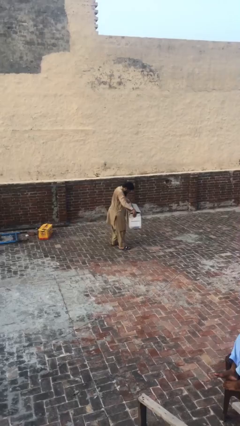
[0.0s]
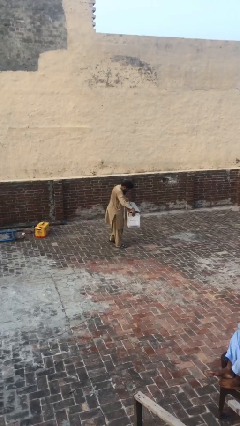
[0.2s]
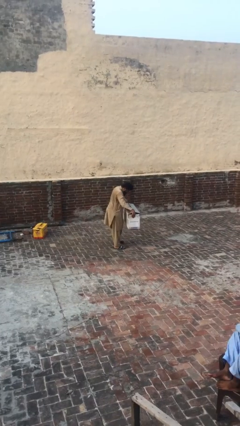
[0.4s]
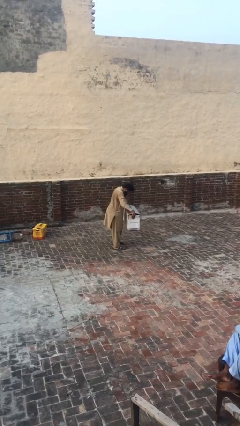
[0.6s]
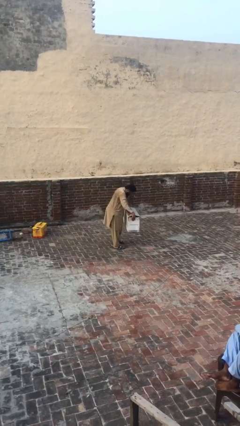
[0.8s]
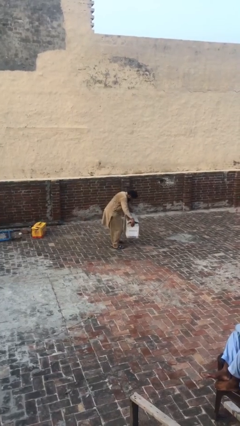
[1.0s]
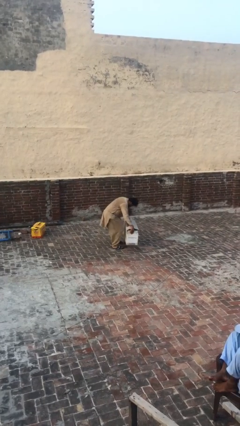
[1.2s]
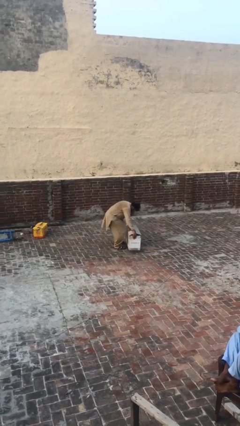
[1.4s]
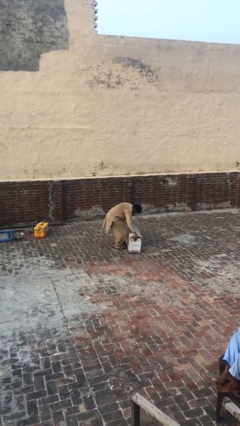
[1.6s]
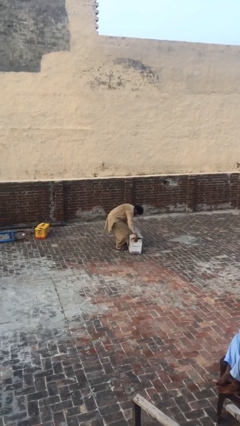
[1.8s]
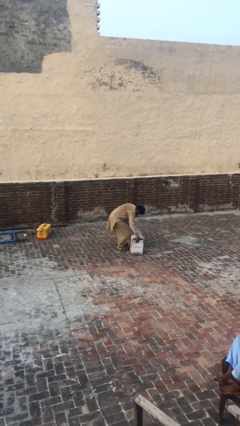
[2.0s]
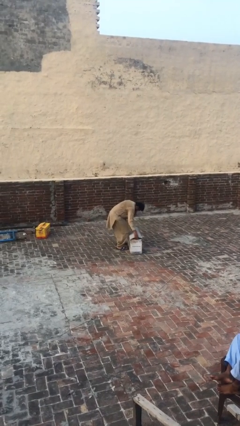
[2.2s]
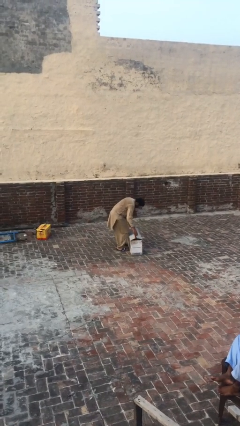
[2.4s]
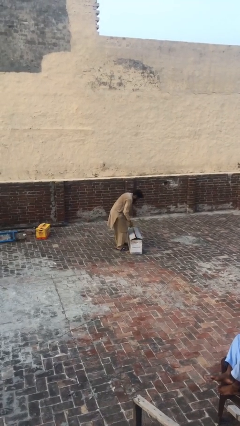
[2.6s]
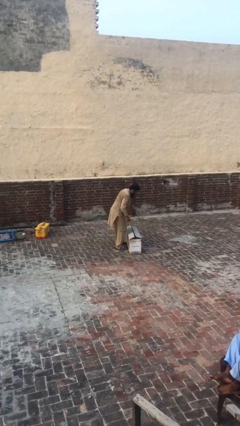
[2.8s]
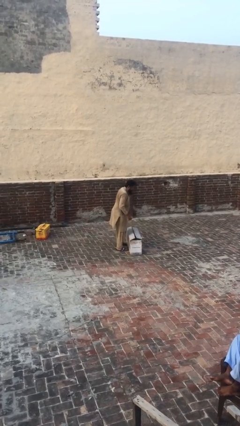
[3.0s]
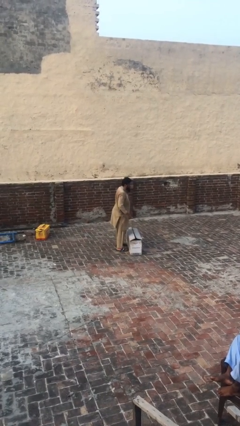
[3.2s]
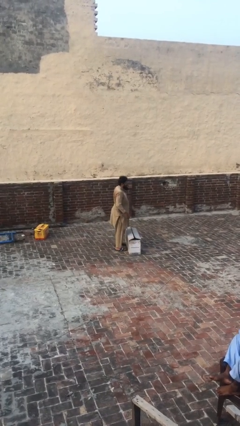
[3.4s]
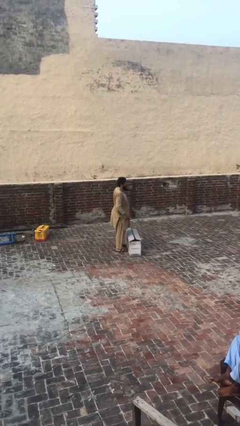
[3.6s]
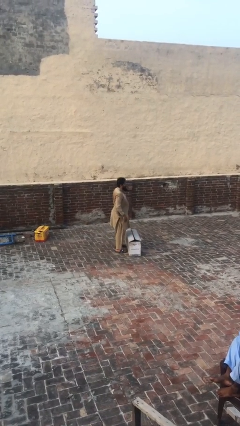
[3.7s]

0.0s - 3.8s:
person puts down object on floor

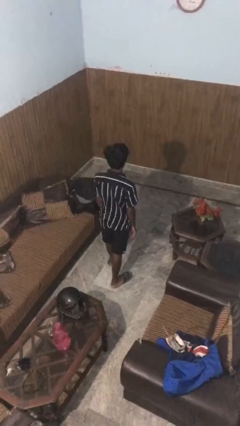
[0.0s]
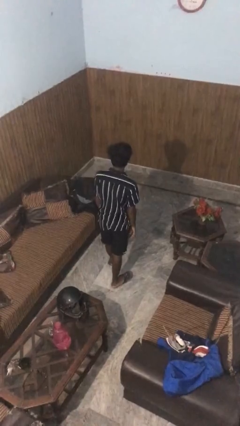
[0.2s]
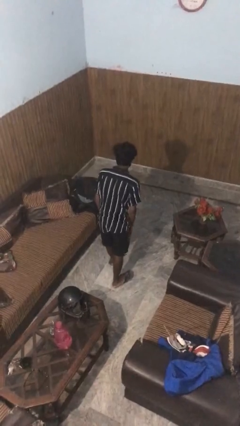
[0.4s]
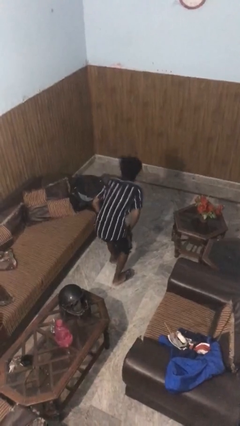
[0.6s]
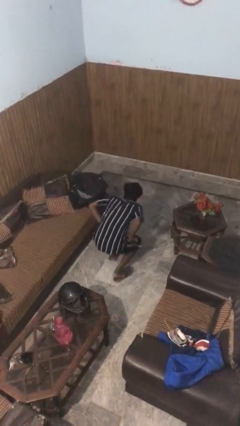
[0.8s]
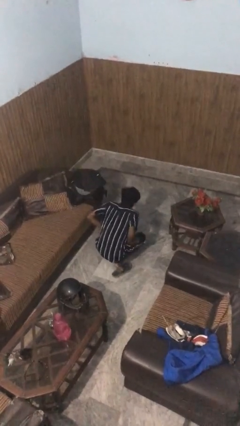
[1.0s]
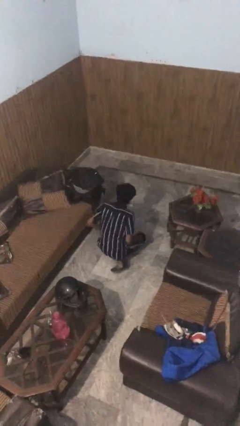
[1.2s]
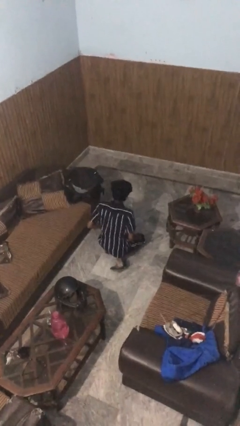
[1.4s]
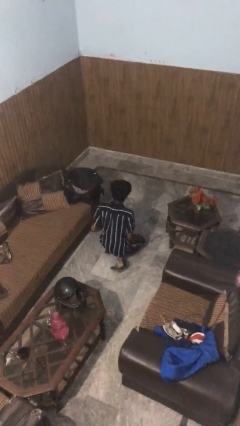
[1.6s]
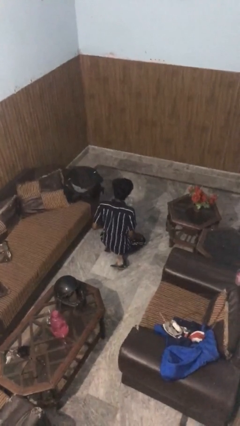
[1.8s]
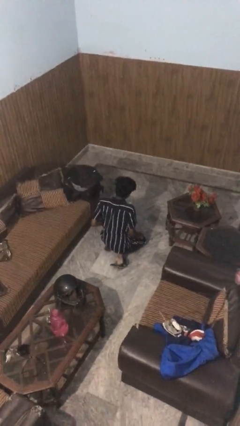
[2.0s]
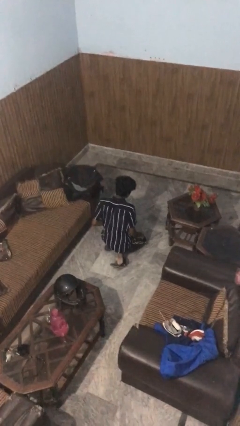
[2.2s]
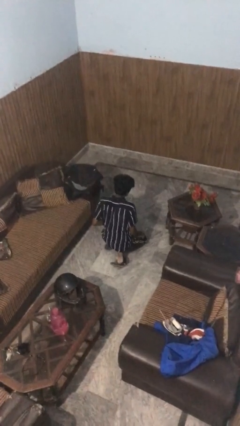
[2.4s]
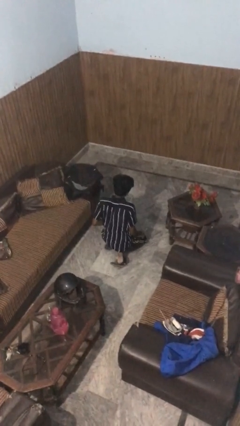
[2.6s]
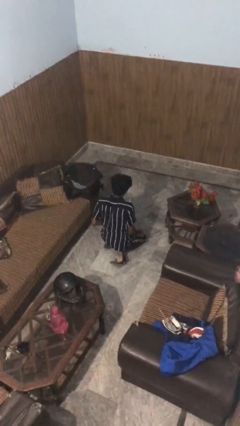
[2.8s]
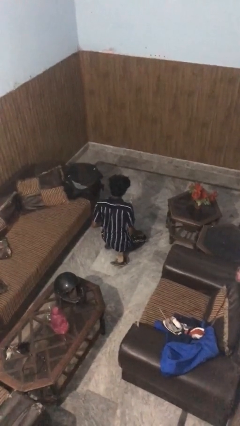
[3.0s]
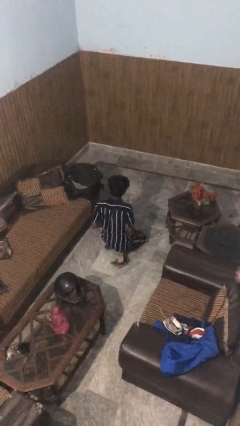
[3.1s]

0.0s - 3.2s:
person kneels

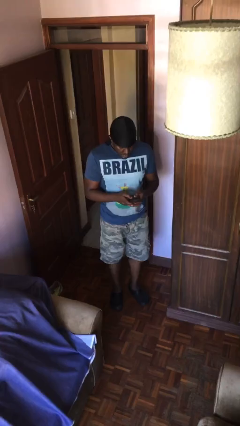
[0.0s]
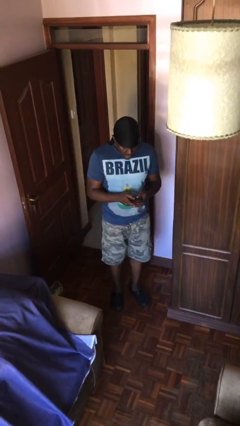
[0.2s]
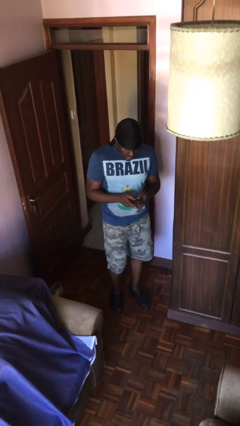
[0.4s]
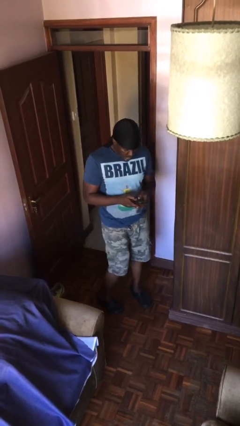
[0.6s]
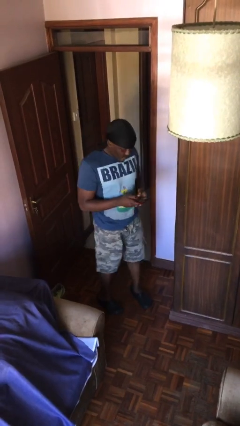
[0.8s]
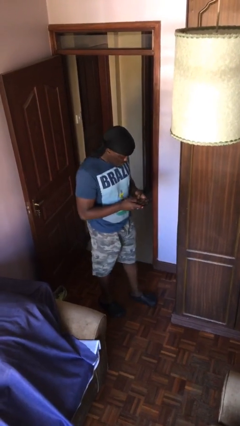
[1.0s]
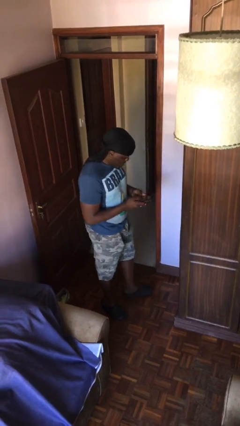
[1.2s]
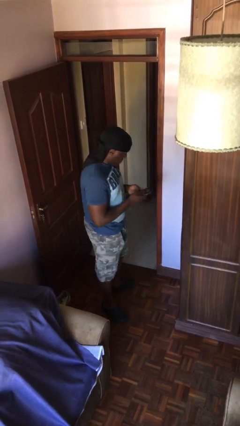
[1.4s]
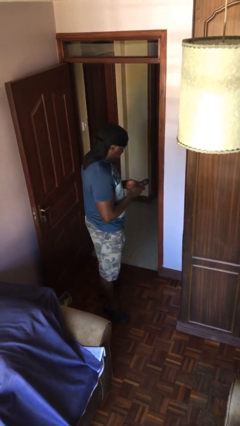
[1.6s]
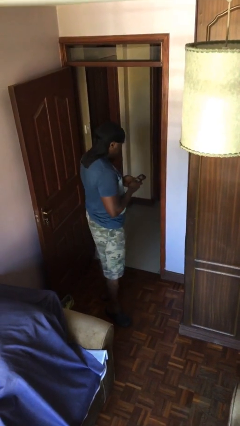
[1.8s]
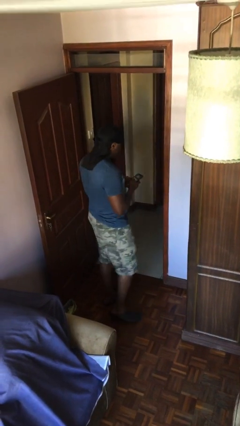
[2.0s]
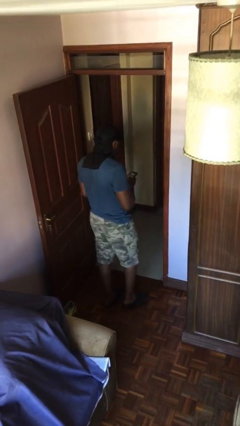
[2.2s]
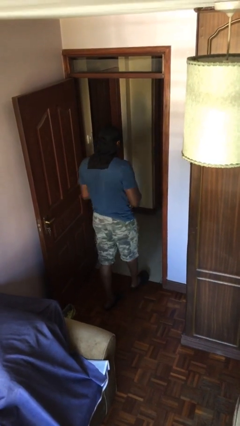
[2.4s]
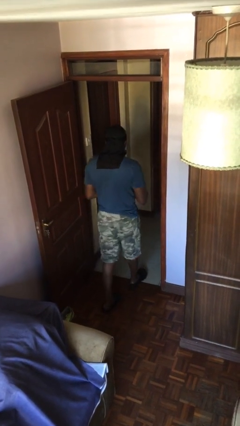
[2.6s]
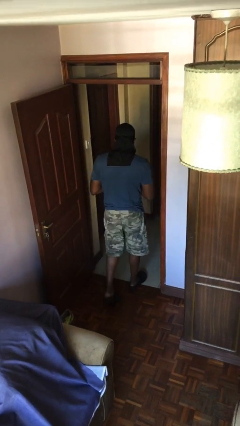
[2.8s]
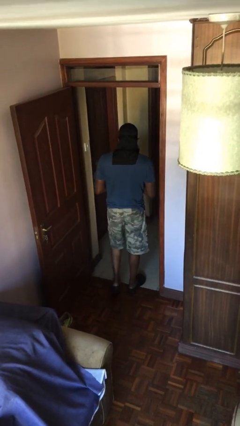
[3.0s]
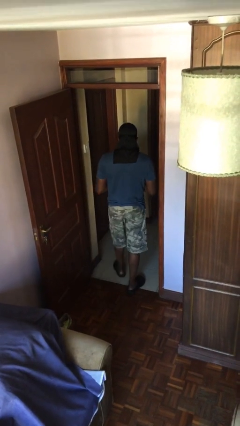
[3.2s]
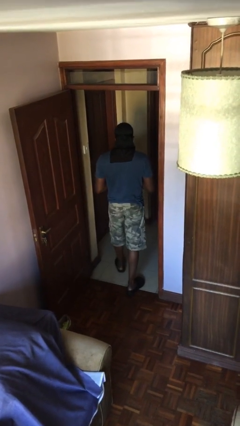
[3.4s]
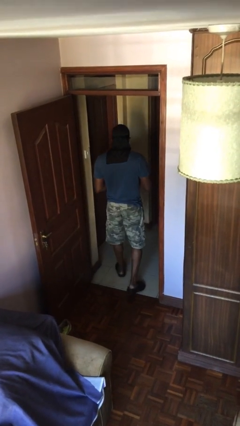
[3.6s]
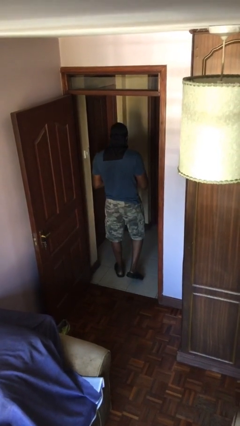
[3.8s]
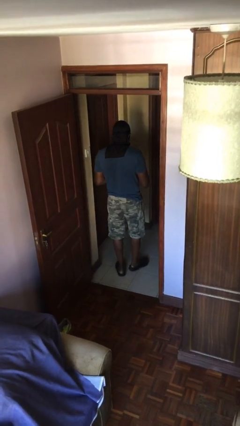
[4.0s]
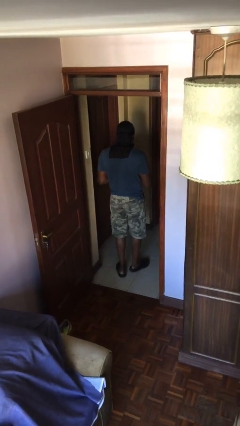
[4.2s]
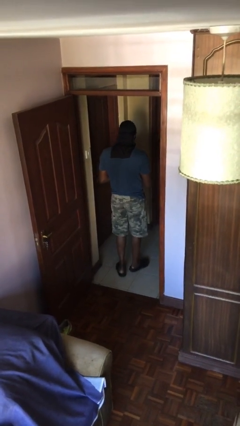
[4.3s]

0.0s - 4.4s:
person exits scene through structure

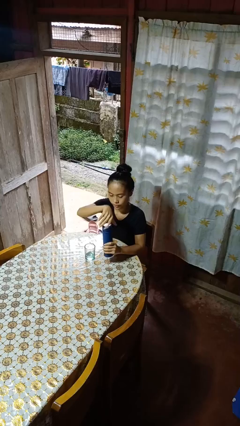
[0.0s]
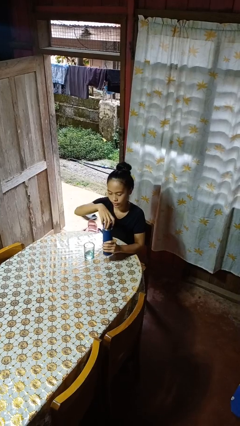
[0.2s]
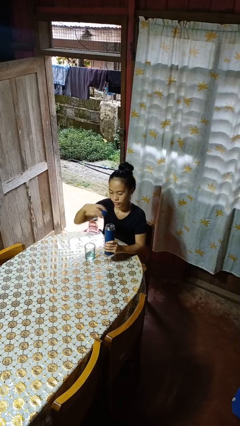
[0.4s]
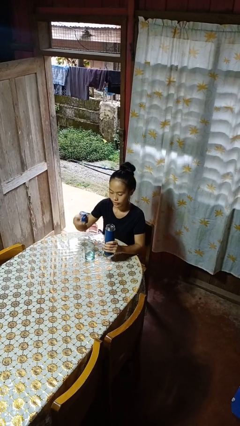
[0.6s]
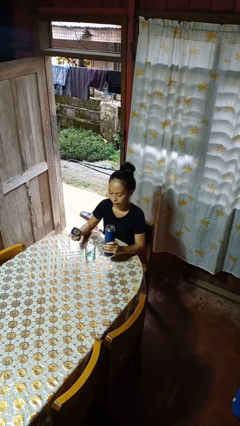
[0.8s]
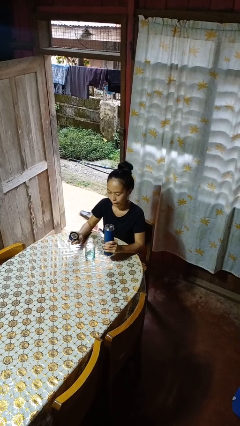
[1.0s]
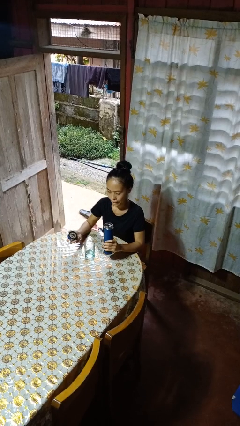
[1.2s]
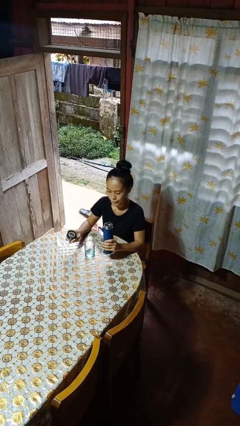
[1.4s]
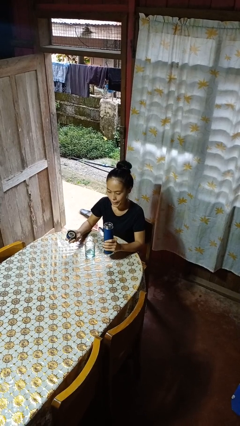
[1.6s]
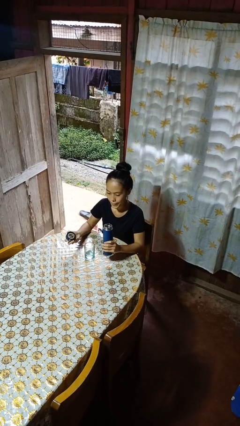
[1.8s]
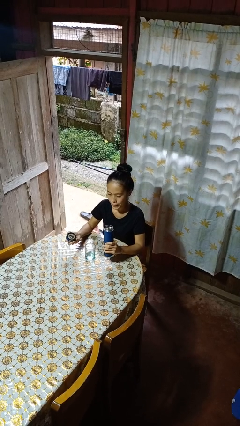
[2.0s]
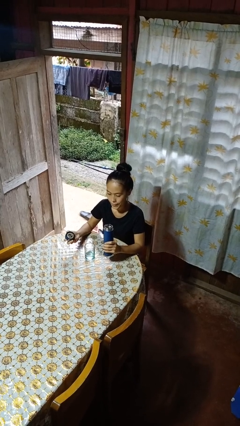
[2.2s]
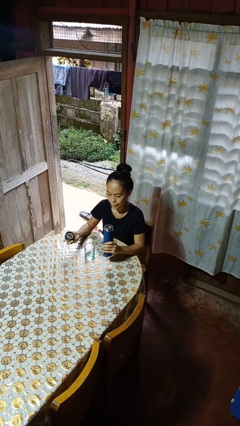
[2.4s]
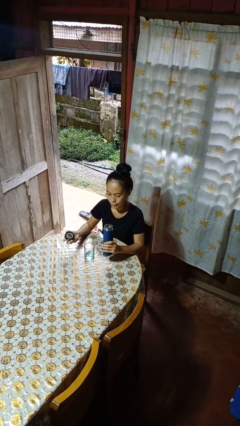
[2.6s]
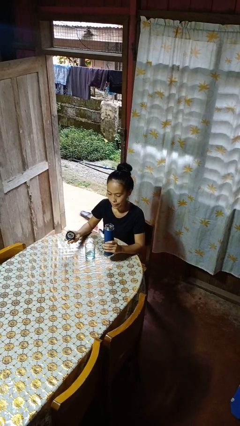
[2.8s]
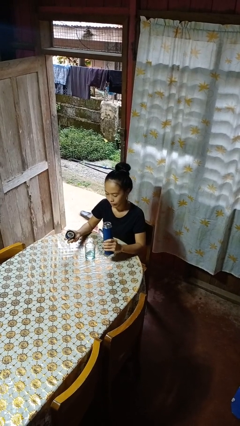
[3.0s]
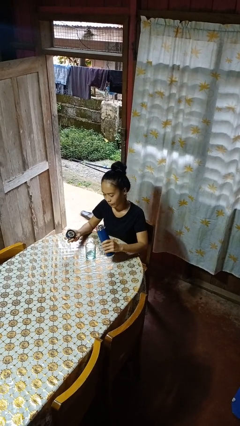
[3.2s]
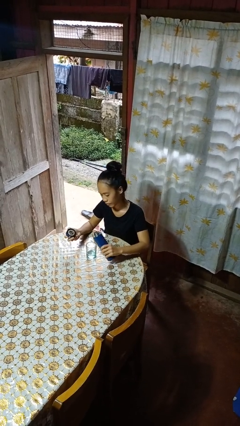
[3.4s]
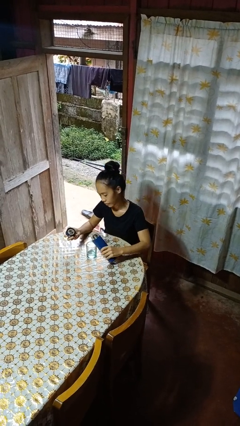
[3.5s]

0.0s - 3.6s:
person unscrews lid from bottle

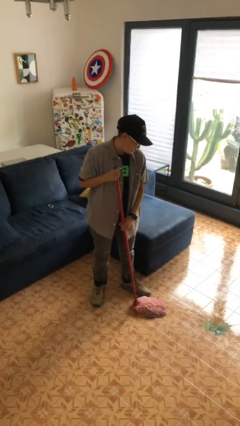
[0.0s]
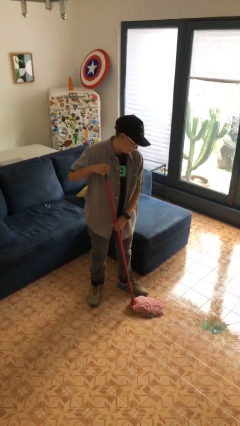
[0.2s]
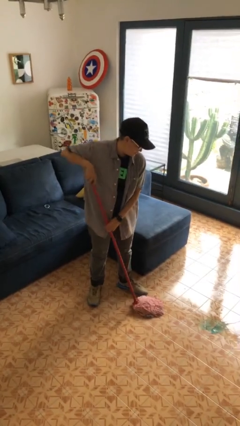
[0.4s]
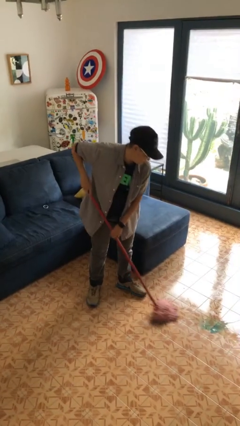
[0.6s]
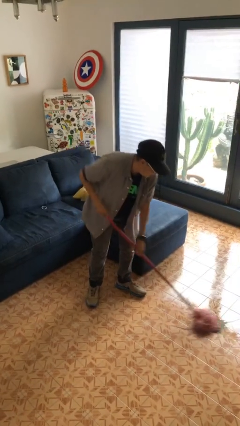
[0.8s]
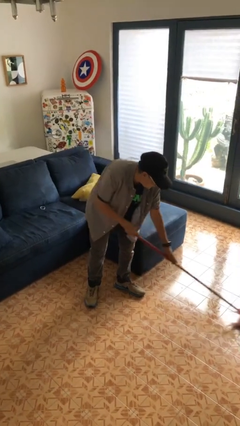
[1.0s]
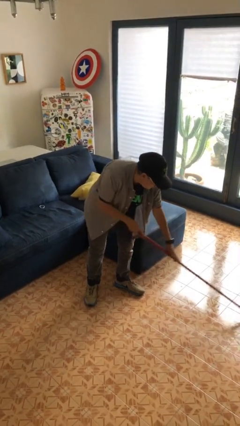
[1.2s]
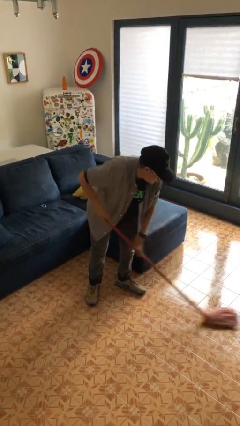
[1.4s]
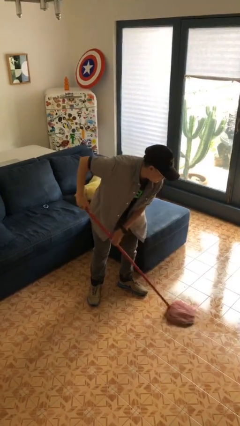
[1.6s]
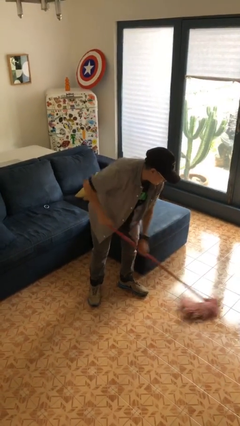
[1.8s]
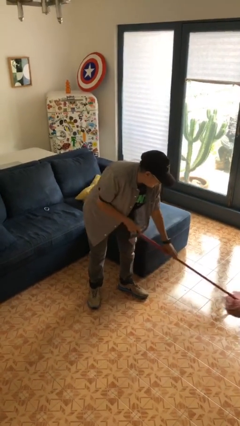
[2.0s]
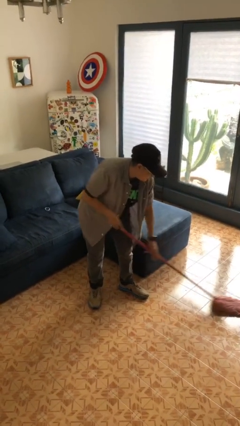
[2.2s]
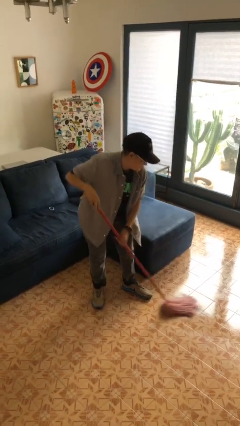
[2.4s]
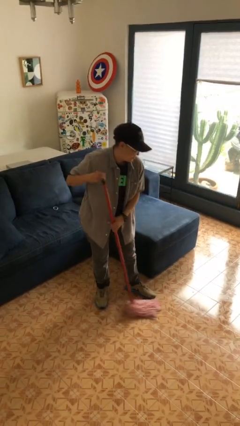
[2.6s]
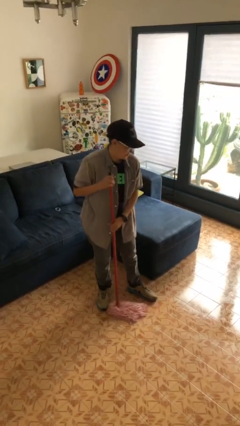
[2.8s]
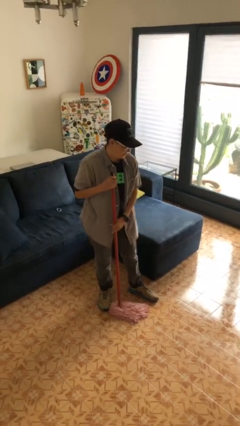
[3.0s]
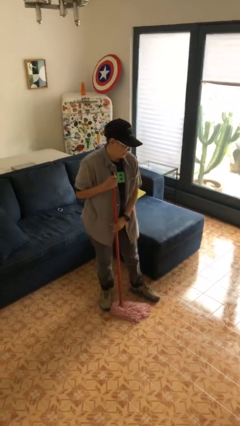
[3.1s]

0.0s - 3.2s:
person mops
